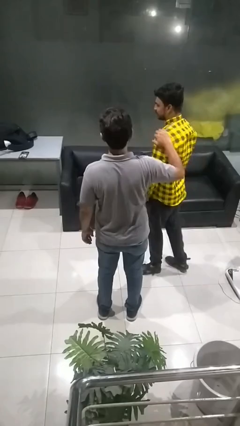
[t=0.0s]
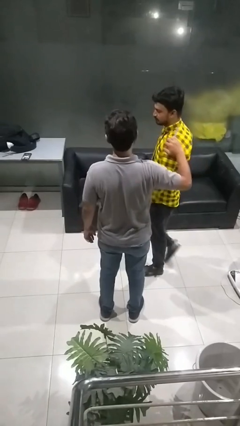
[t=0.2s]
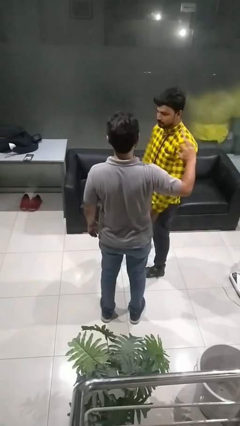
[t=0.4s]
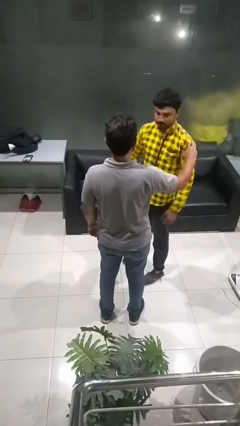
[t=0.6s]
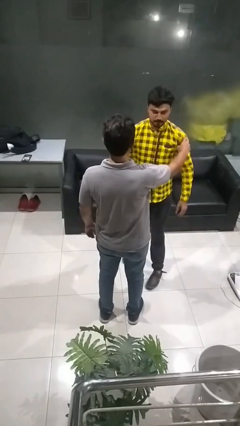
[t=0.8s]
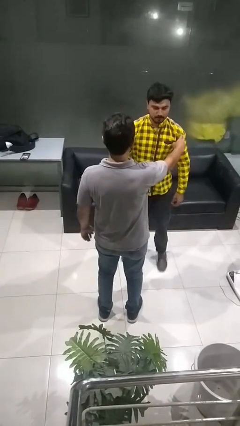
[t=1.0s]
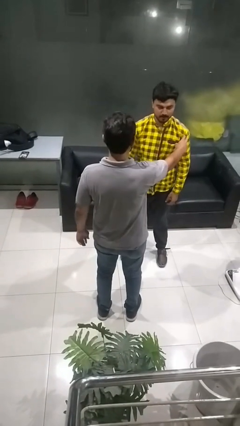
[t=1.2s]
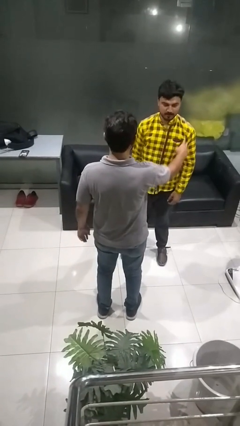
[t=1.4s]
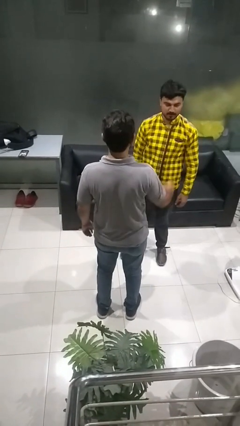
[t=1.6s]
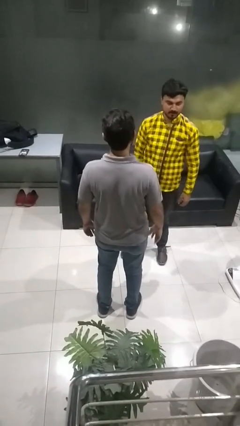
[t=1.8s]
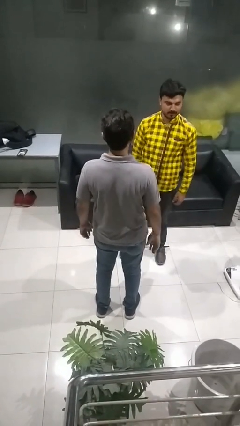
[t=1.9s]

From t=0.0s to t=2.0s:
person spins person around

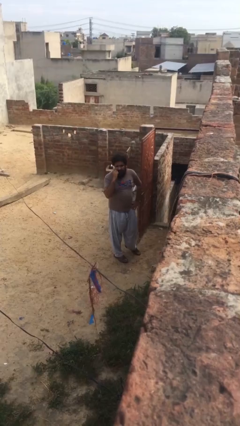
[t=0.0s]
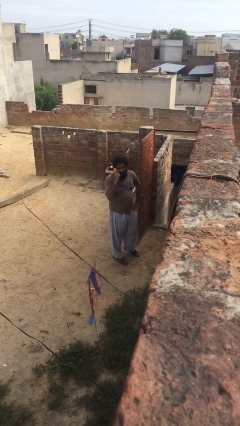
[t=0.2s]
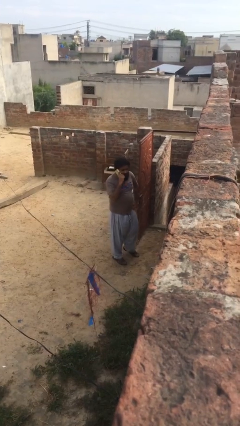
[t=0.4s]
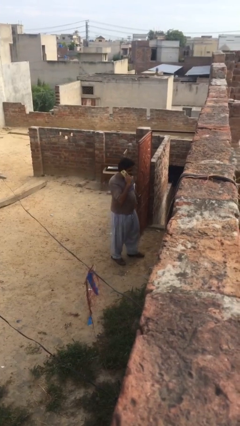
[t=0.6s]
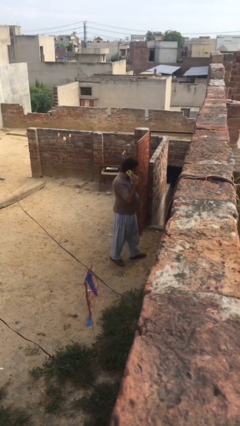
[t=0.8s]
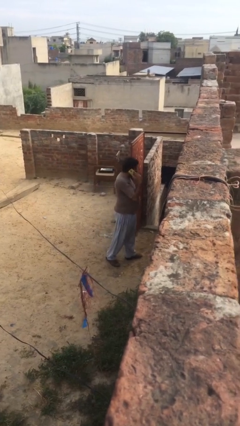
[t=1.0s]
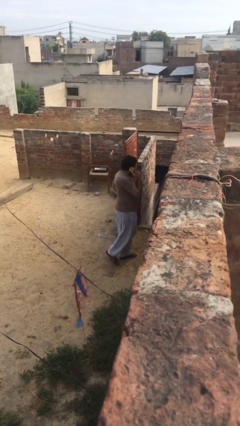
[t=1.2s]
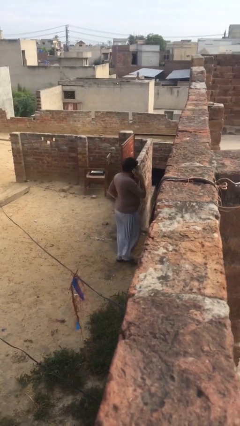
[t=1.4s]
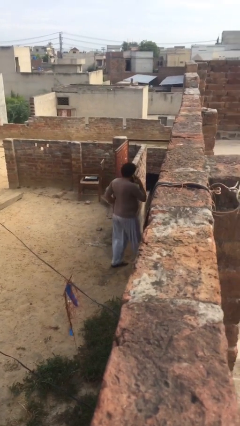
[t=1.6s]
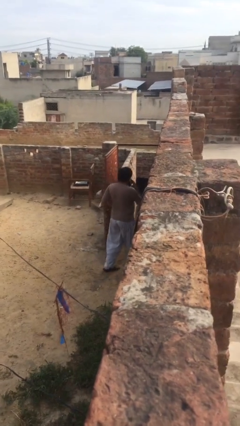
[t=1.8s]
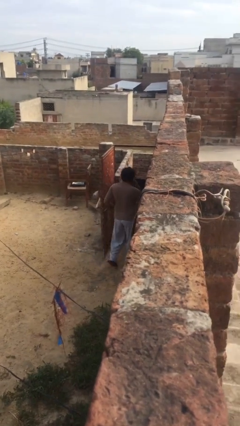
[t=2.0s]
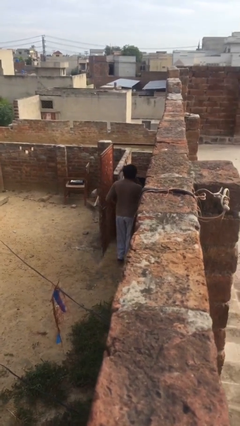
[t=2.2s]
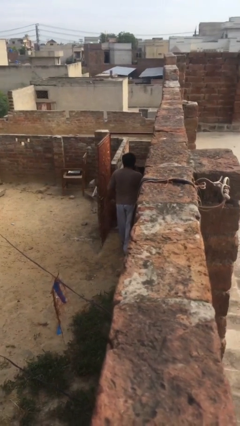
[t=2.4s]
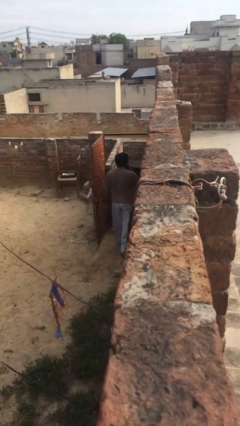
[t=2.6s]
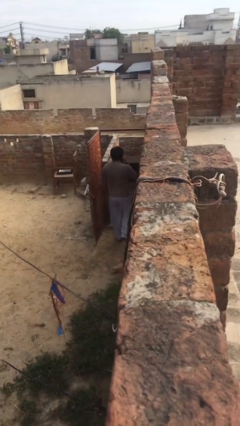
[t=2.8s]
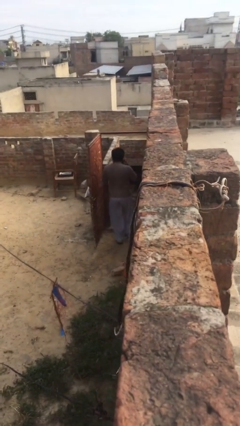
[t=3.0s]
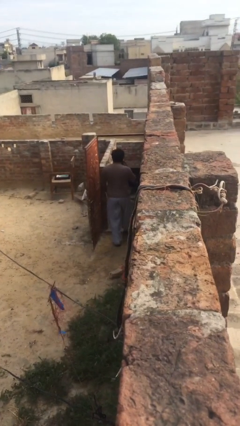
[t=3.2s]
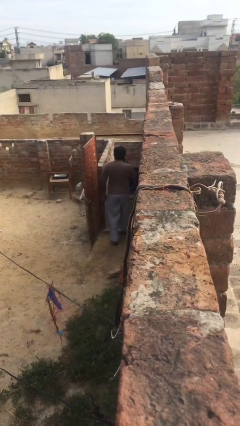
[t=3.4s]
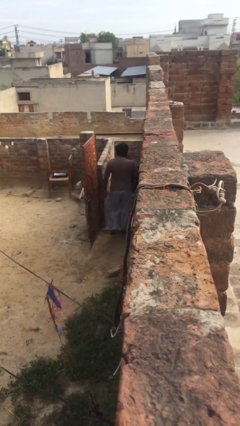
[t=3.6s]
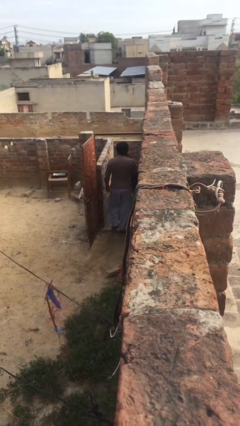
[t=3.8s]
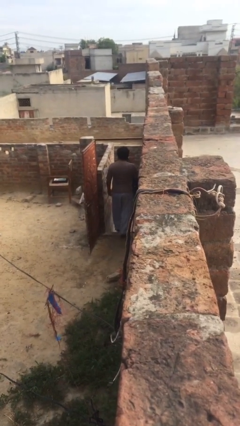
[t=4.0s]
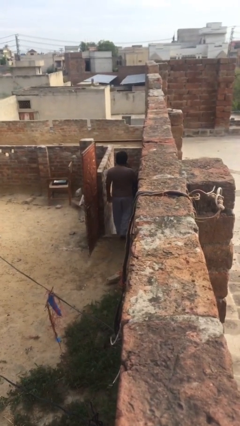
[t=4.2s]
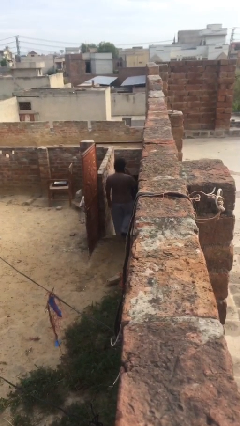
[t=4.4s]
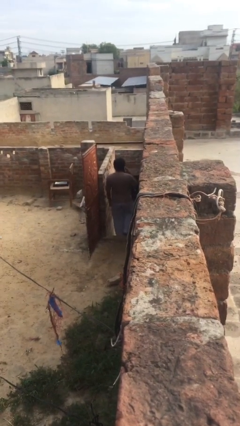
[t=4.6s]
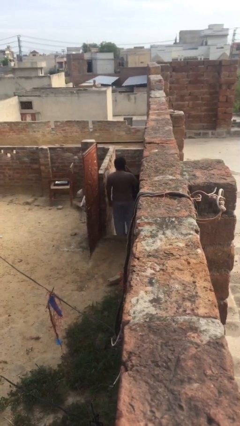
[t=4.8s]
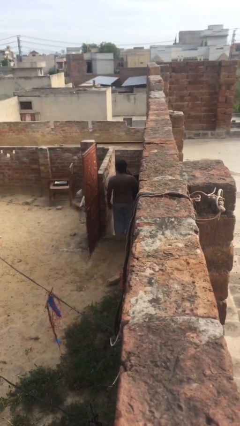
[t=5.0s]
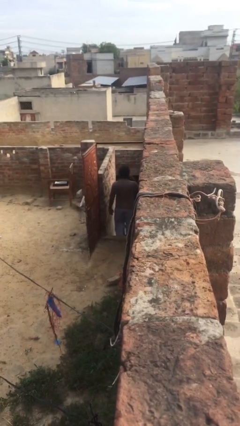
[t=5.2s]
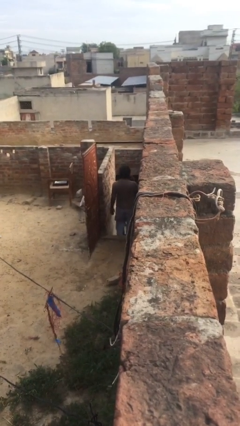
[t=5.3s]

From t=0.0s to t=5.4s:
person exits scene through structure

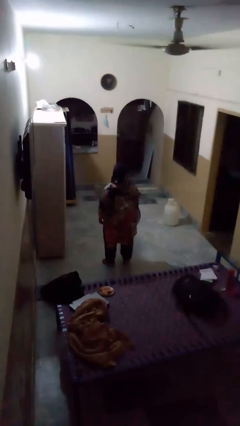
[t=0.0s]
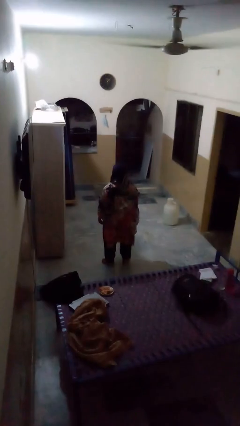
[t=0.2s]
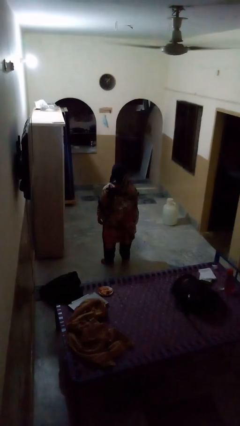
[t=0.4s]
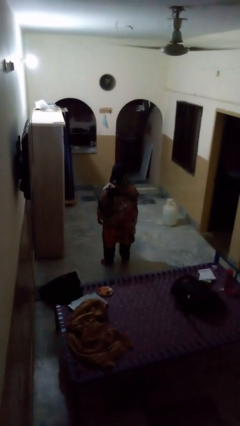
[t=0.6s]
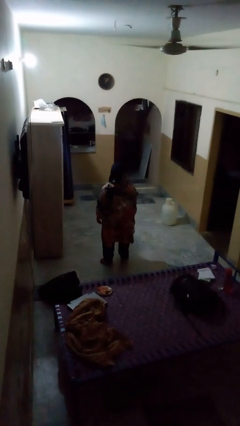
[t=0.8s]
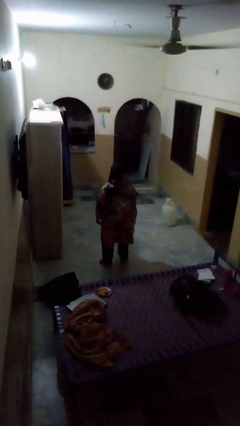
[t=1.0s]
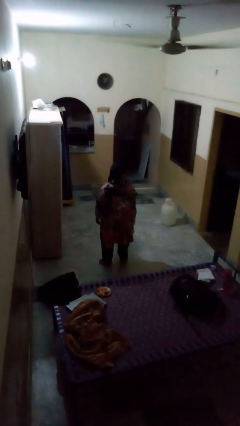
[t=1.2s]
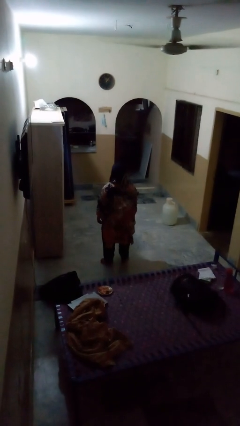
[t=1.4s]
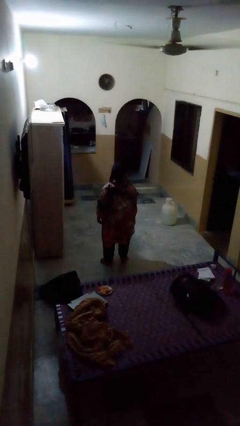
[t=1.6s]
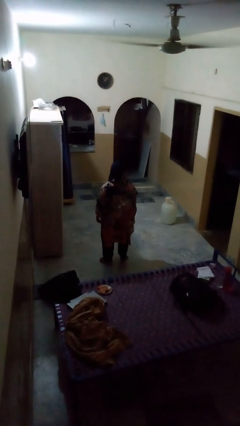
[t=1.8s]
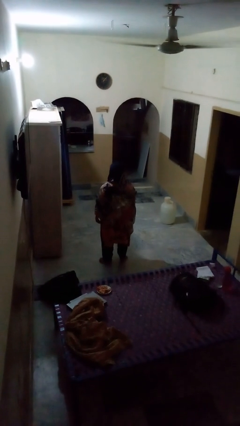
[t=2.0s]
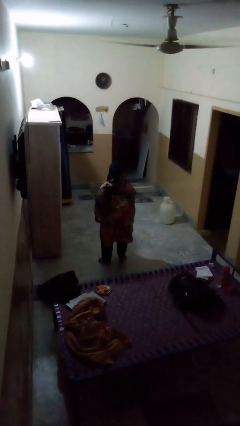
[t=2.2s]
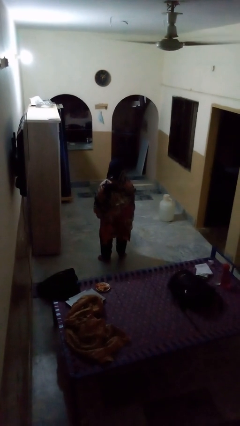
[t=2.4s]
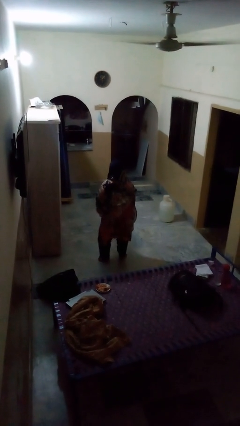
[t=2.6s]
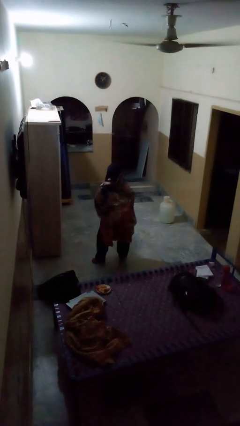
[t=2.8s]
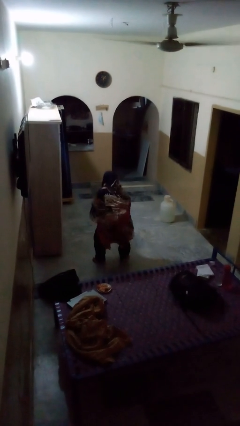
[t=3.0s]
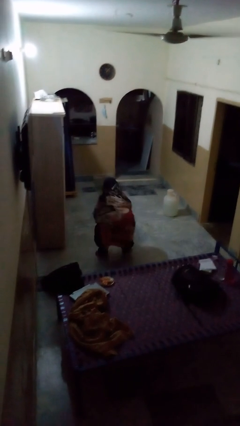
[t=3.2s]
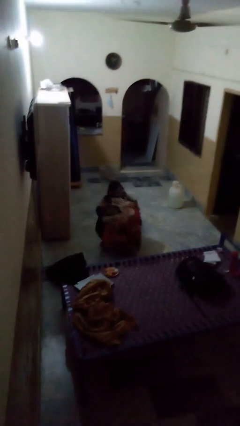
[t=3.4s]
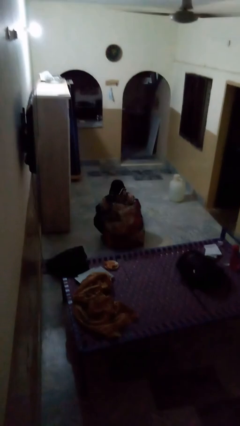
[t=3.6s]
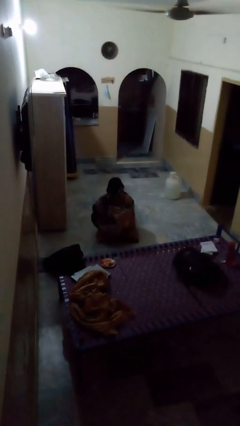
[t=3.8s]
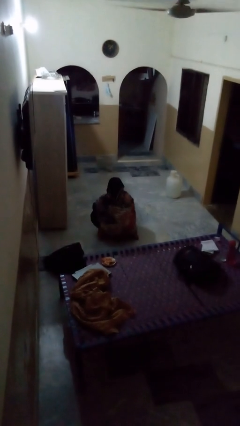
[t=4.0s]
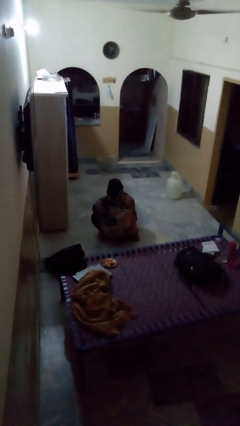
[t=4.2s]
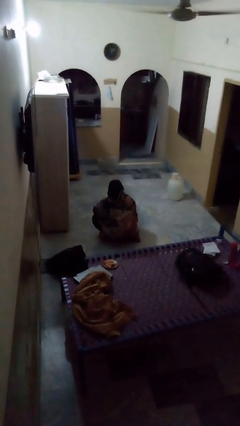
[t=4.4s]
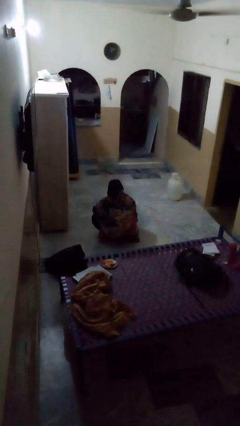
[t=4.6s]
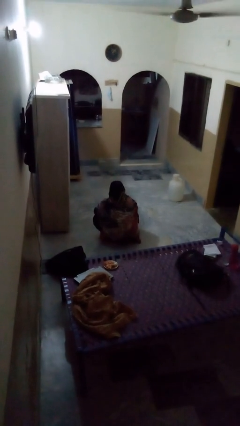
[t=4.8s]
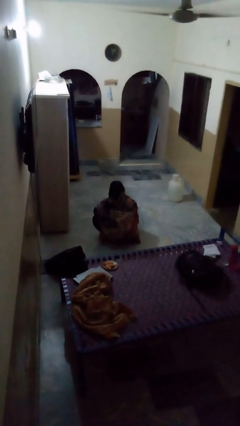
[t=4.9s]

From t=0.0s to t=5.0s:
person squats

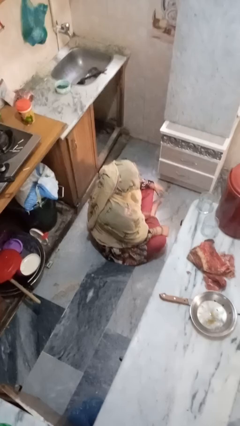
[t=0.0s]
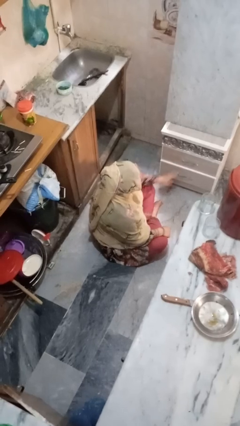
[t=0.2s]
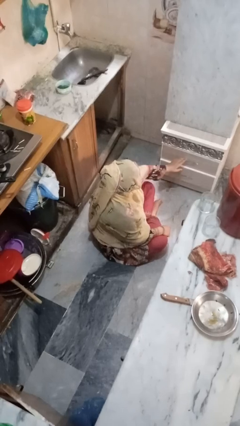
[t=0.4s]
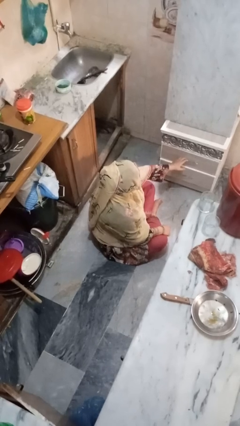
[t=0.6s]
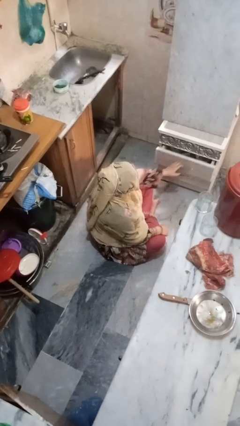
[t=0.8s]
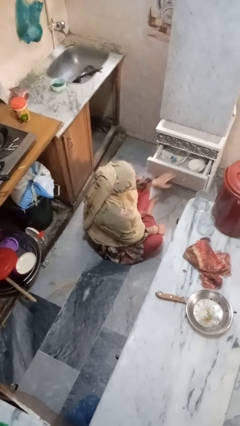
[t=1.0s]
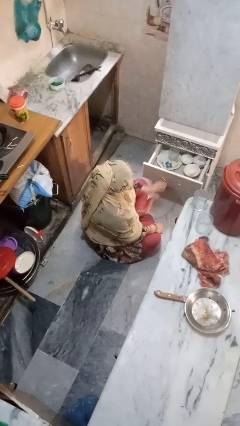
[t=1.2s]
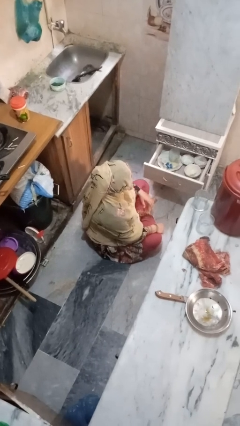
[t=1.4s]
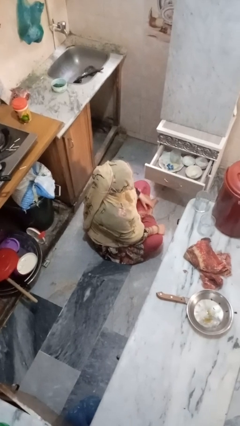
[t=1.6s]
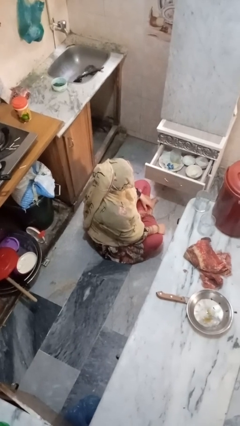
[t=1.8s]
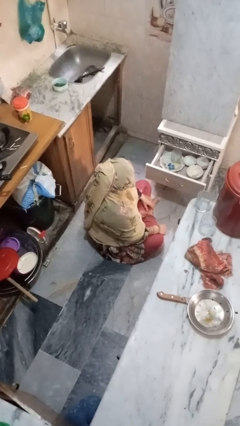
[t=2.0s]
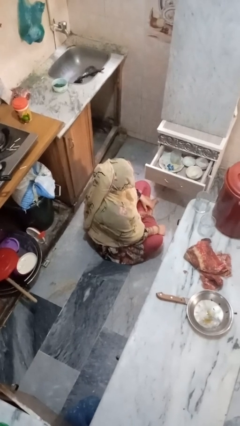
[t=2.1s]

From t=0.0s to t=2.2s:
person opens kitchen drawer

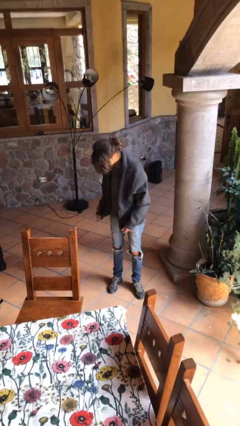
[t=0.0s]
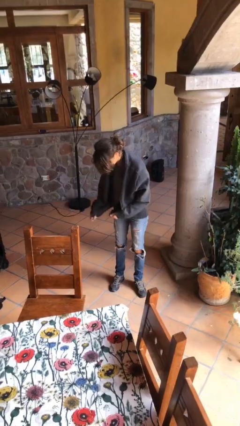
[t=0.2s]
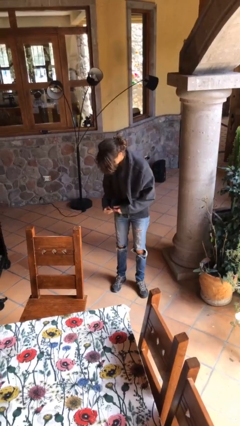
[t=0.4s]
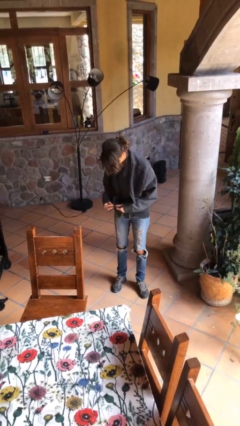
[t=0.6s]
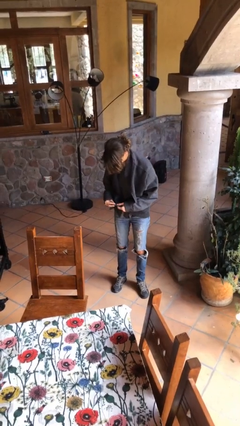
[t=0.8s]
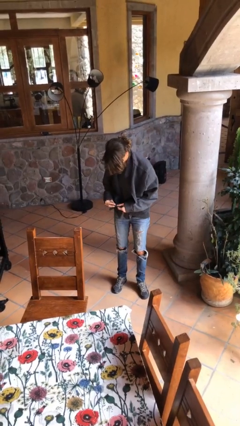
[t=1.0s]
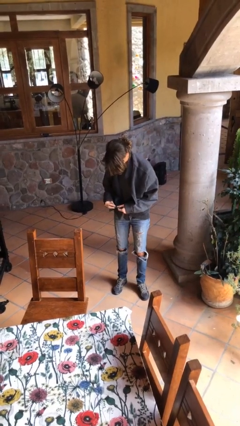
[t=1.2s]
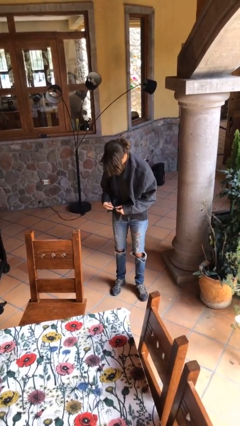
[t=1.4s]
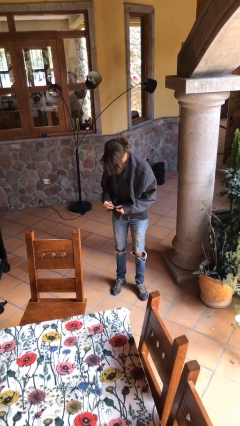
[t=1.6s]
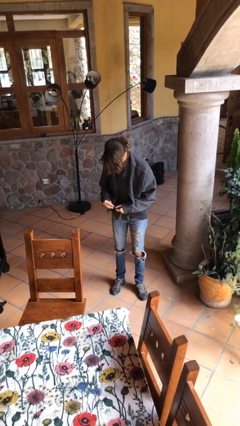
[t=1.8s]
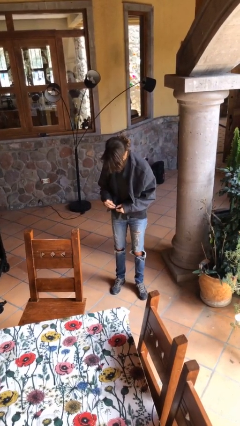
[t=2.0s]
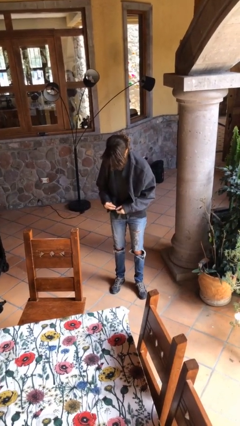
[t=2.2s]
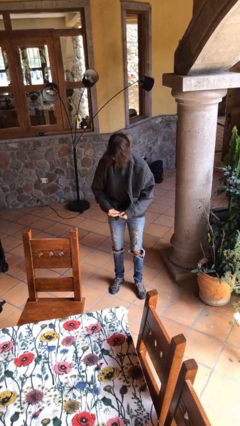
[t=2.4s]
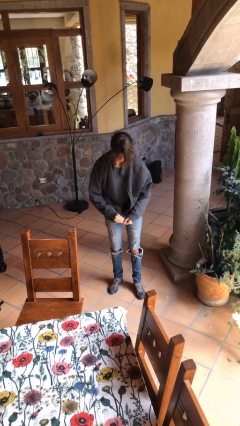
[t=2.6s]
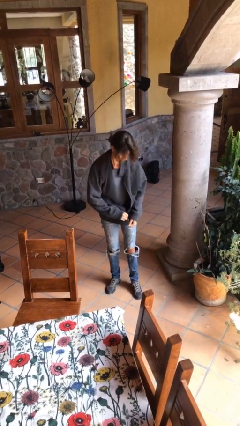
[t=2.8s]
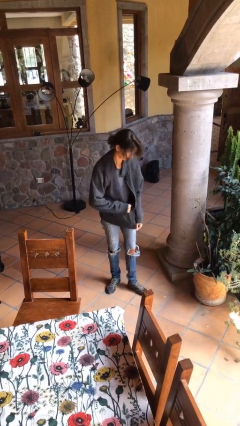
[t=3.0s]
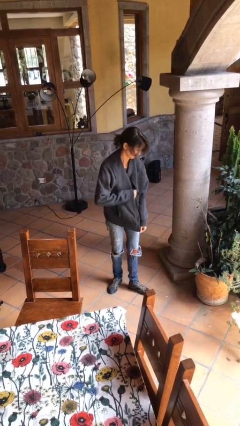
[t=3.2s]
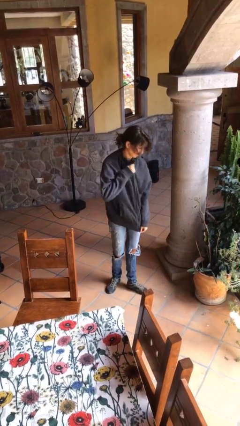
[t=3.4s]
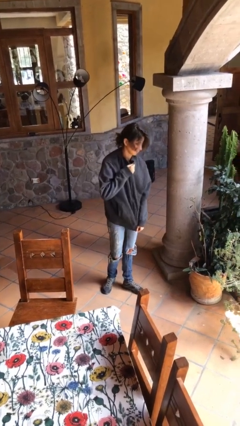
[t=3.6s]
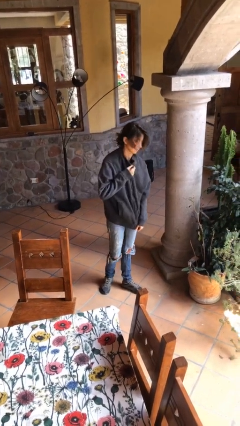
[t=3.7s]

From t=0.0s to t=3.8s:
person zips up jacket
